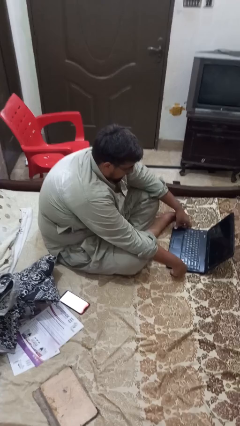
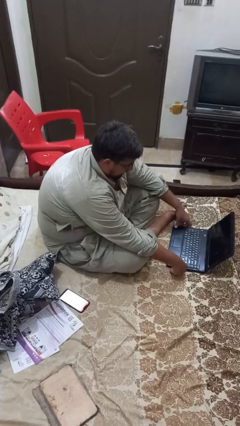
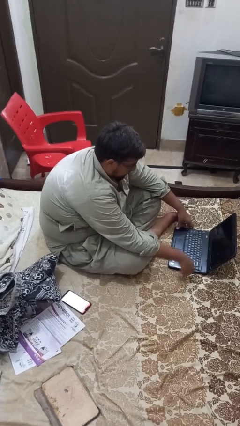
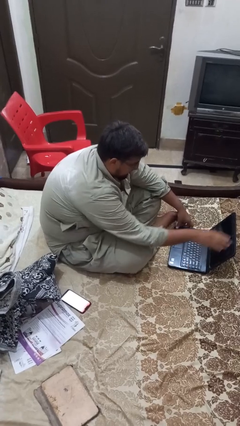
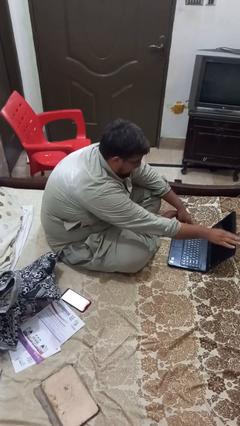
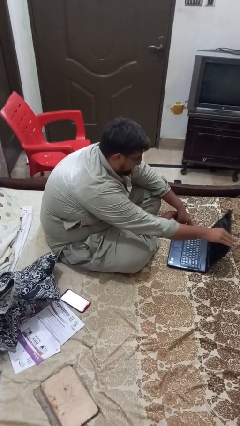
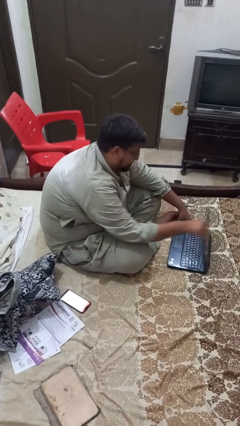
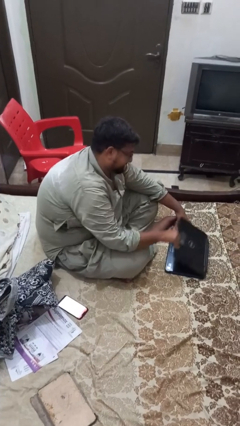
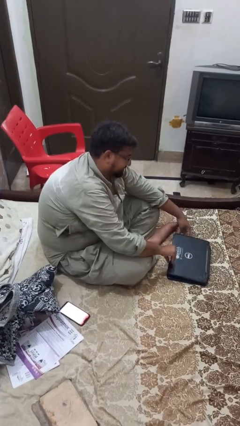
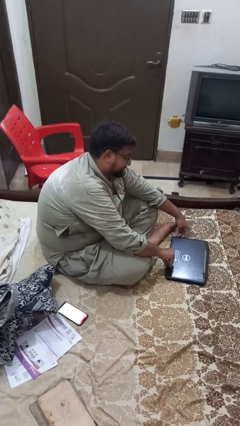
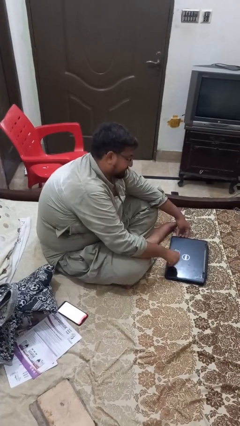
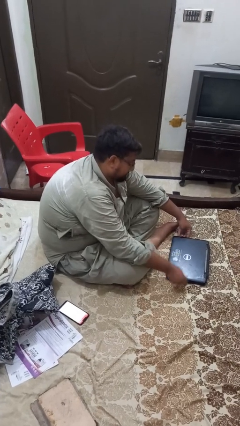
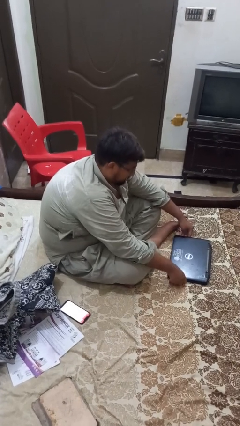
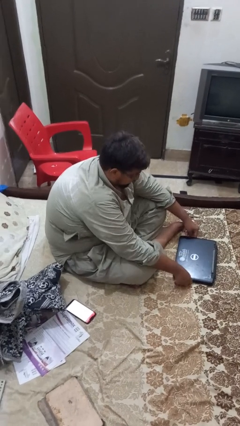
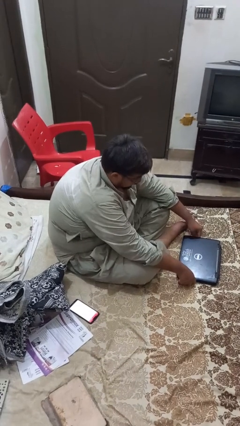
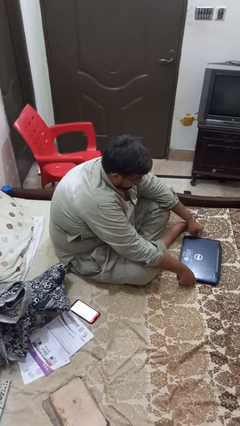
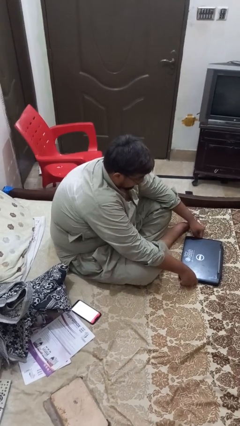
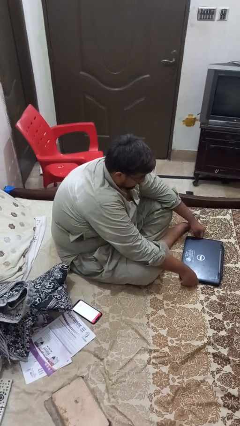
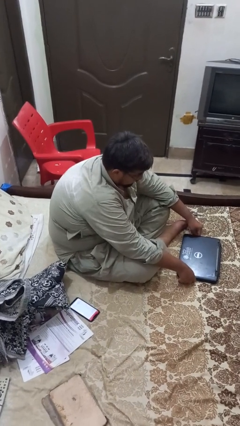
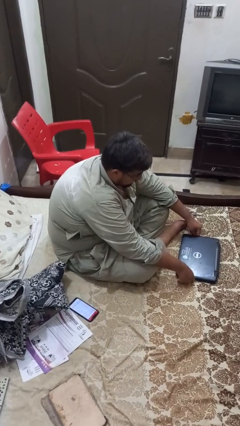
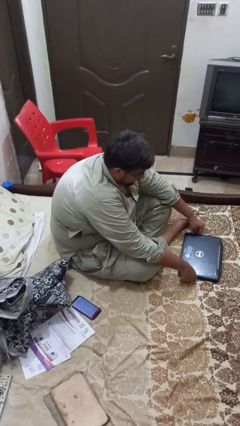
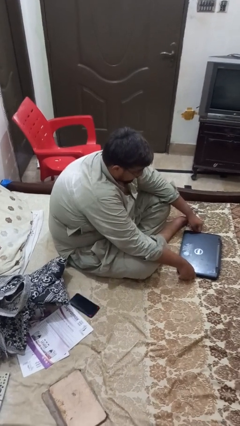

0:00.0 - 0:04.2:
person closes laptop

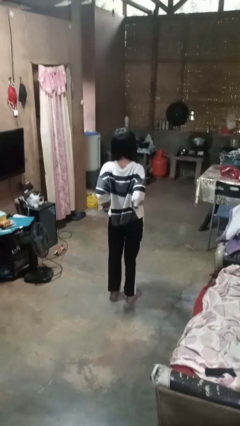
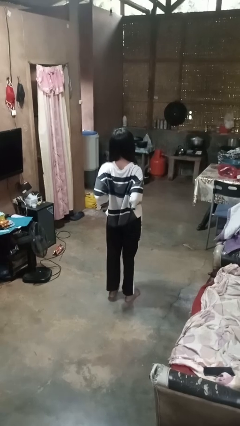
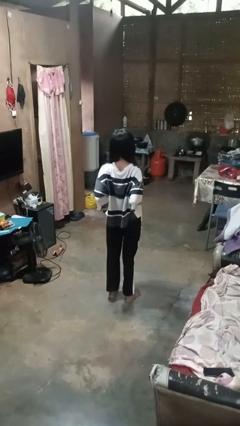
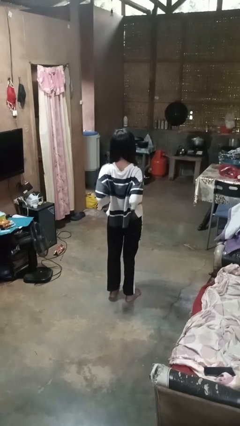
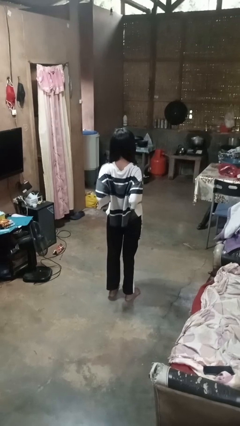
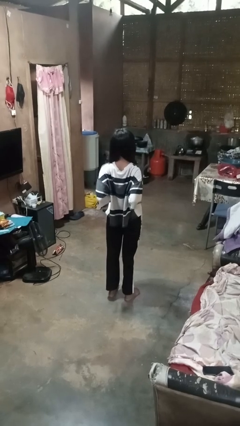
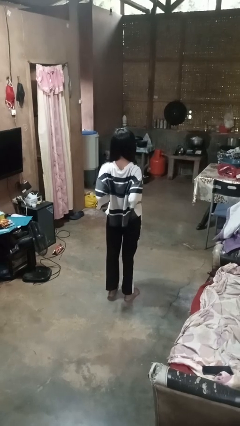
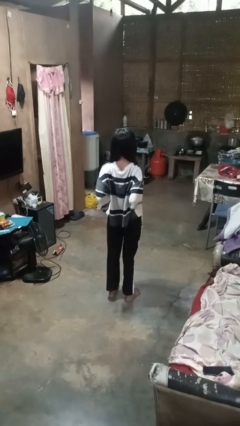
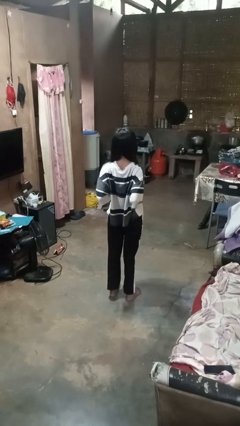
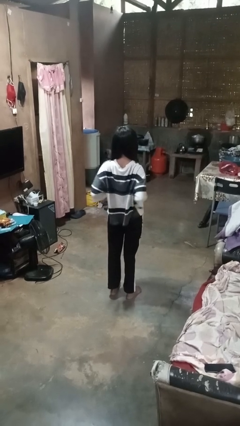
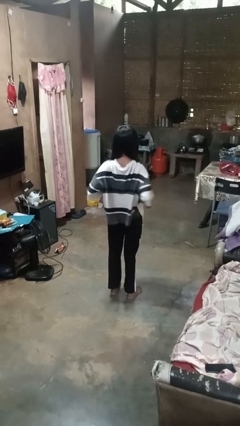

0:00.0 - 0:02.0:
person stretches back

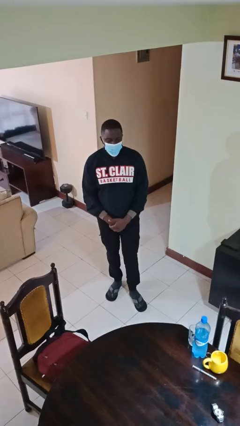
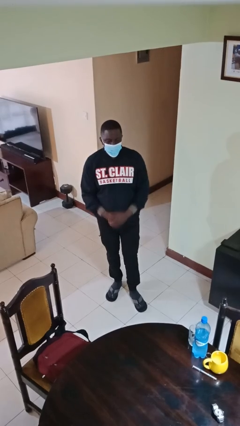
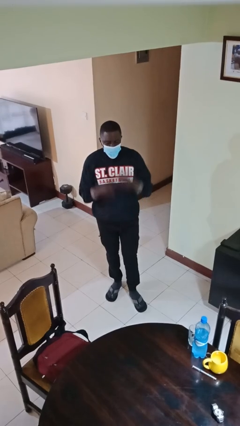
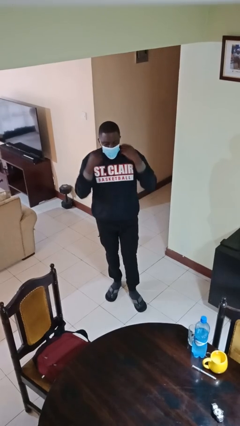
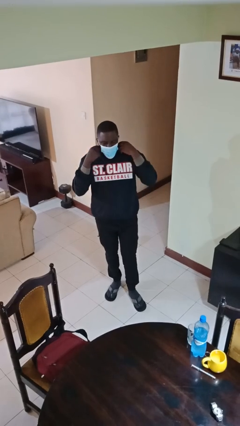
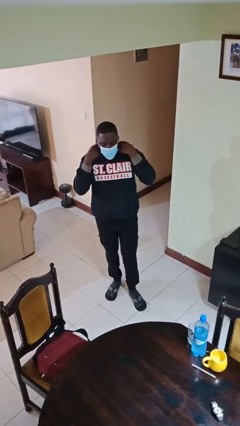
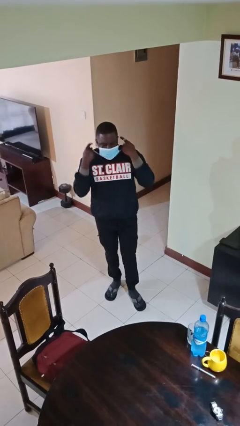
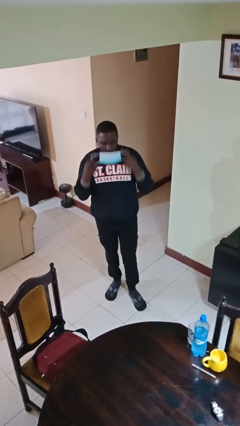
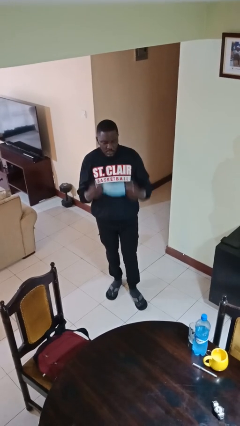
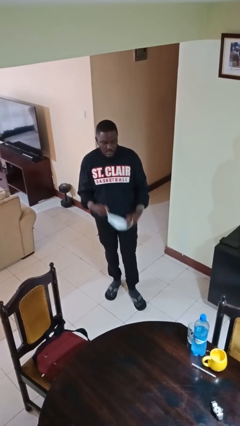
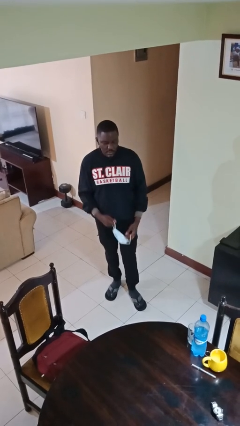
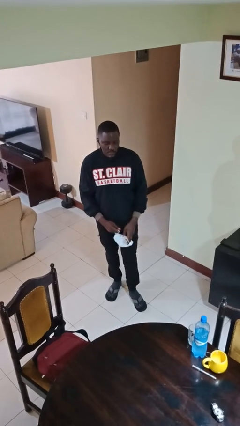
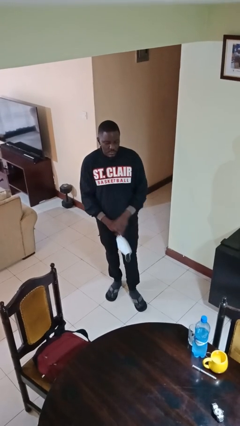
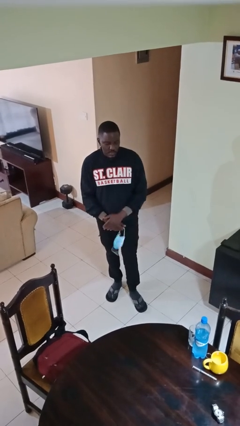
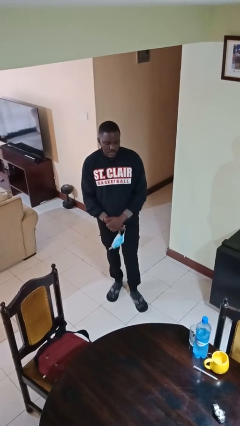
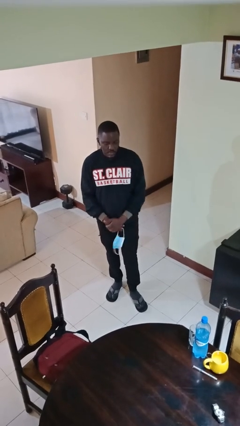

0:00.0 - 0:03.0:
person takes off facemask

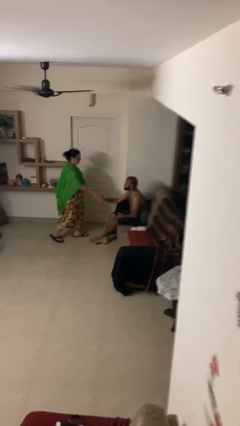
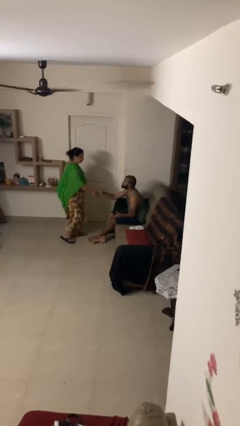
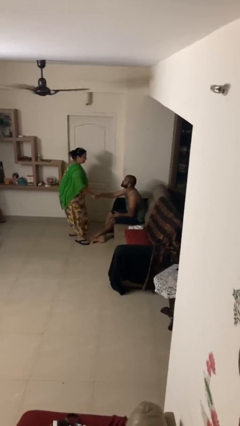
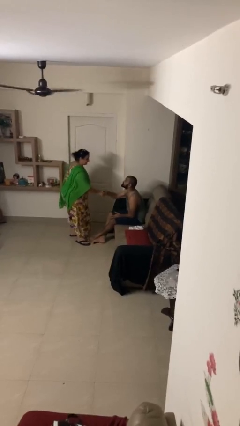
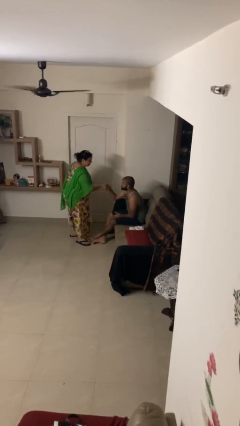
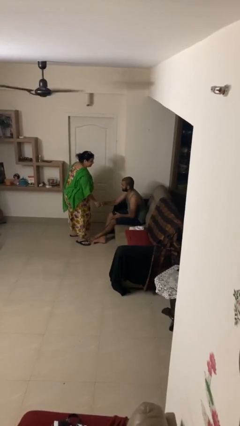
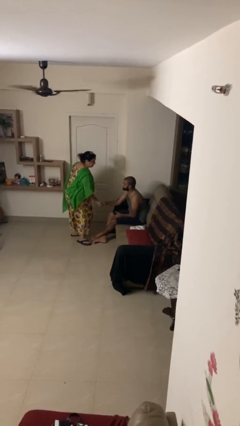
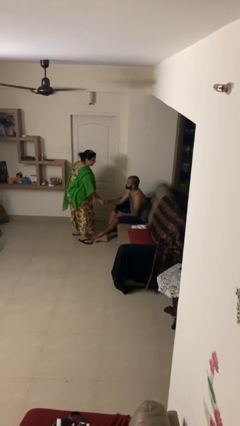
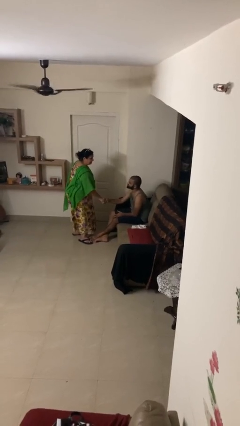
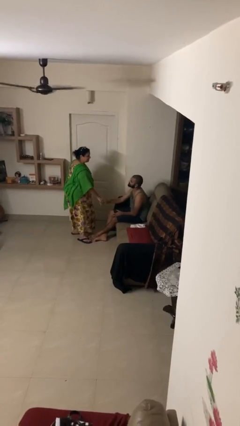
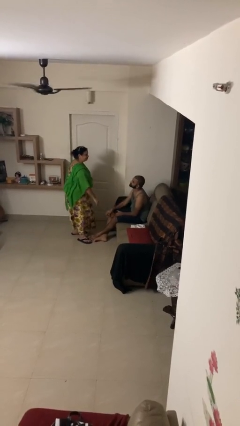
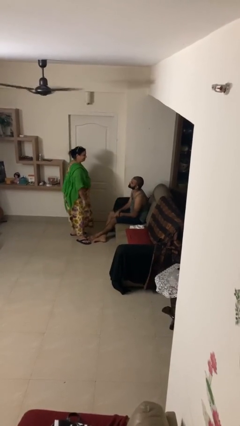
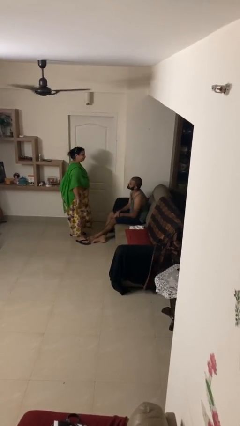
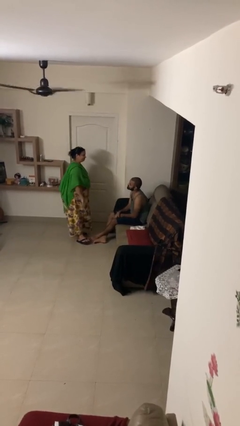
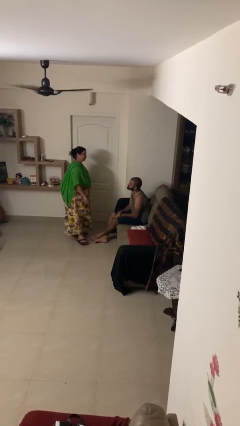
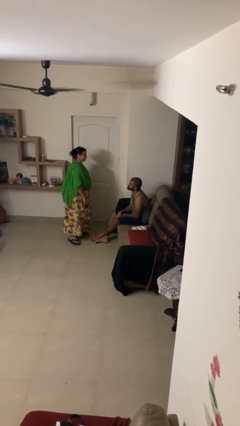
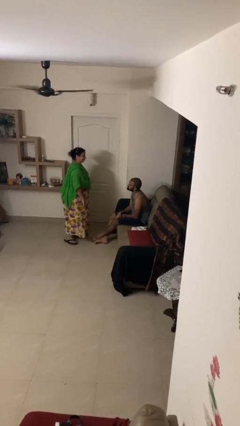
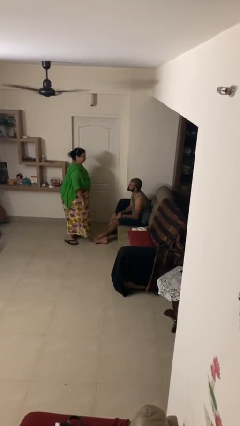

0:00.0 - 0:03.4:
person shakes hand

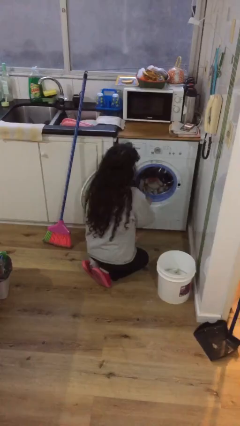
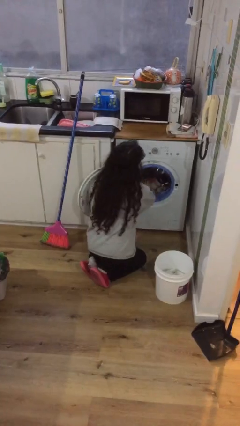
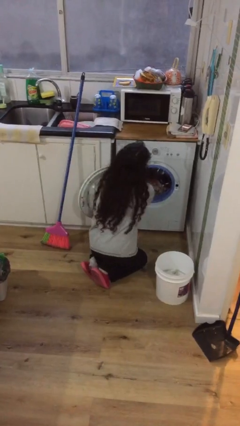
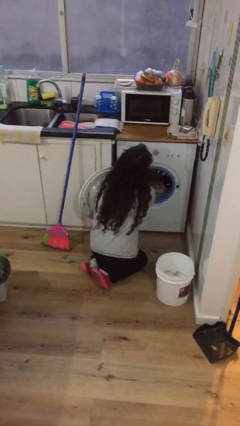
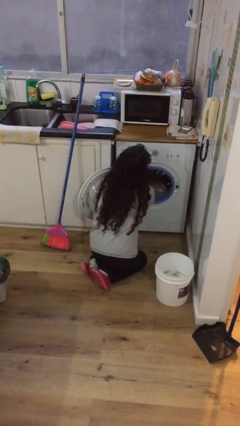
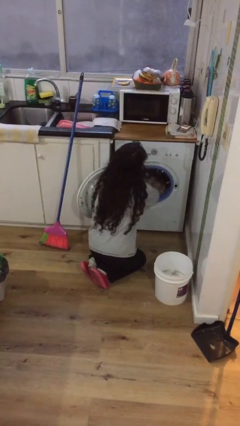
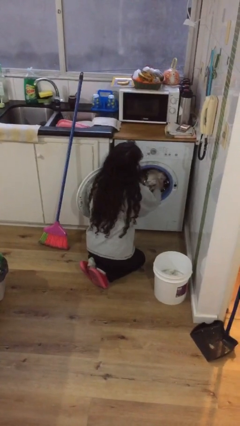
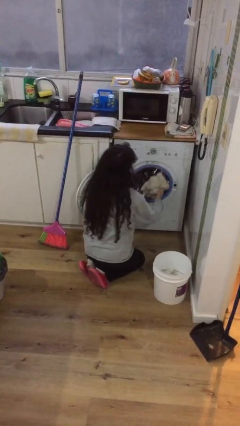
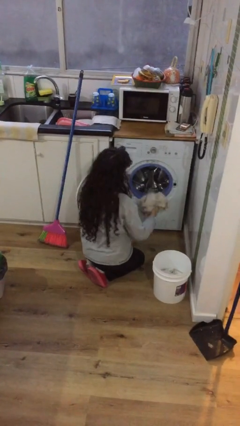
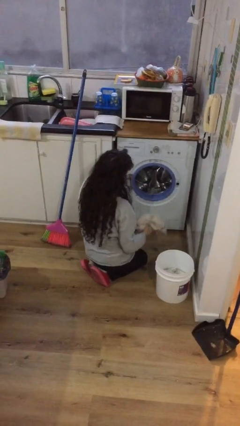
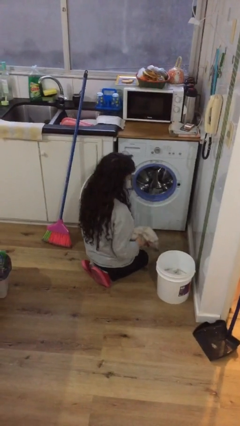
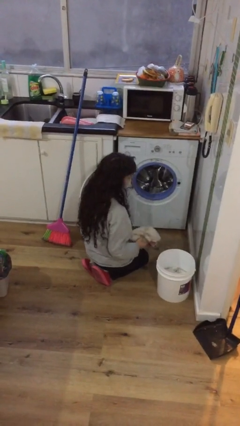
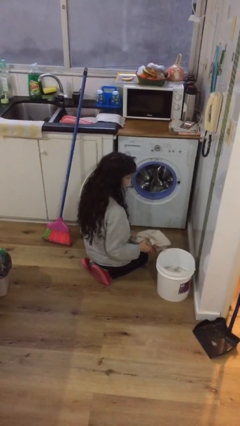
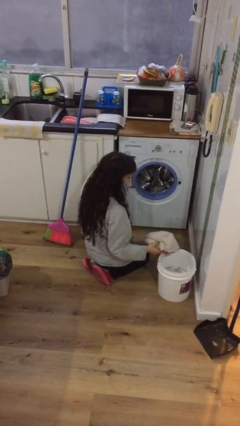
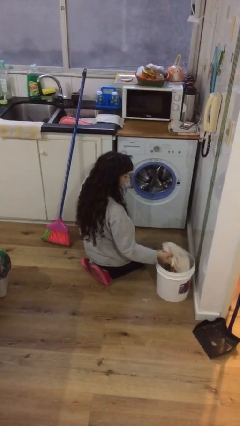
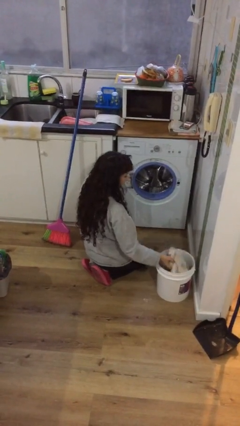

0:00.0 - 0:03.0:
person unloads dryer

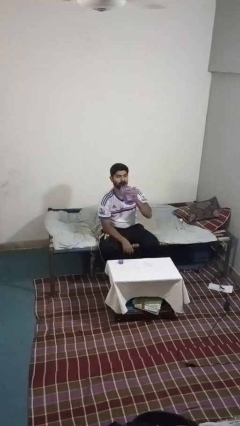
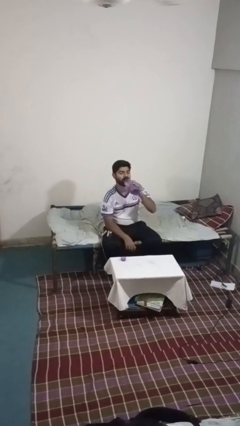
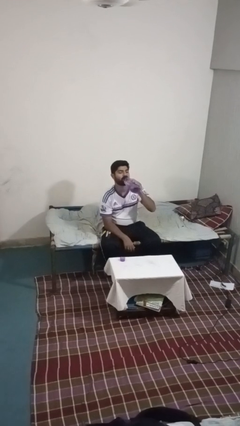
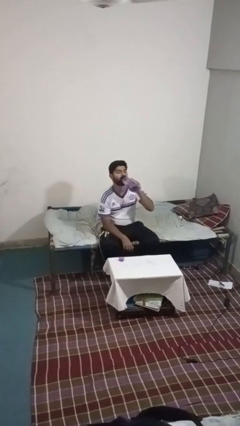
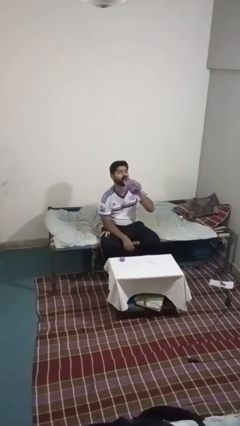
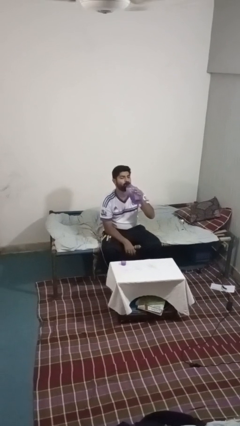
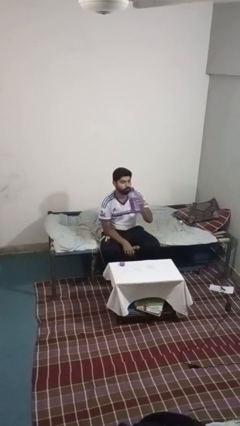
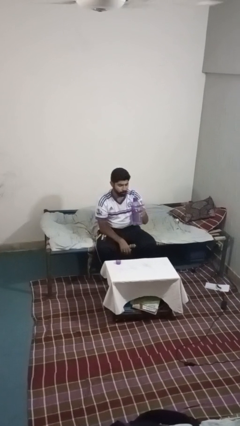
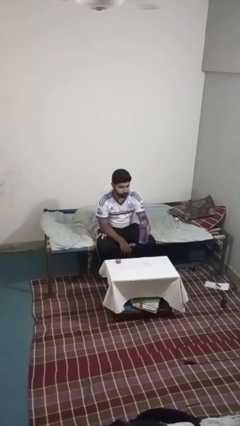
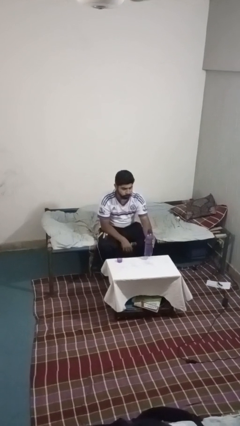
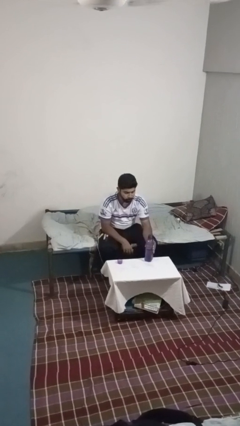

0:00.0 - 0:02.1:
person drinks from bottle
